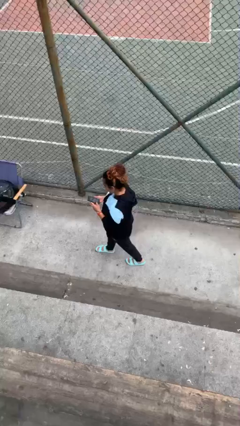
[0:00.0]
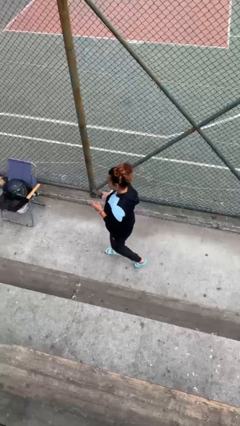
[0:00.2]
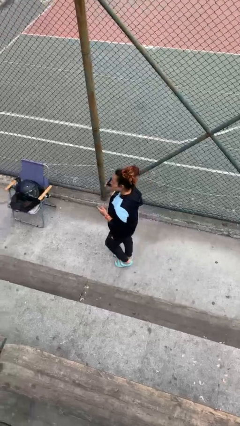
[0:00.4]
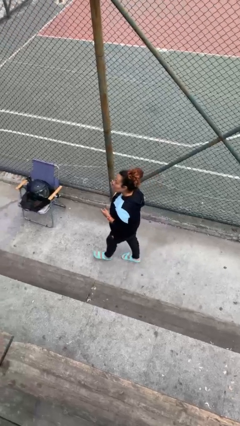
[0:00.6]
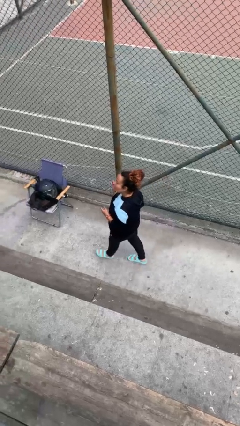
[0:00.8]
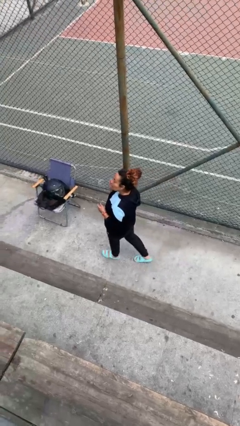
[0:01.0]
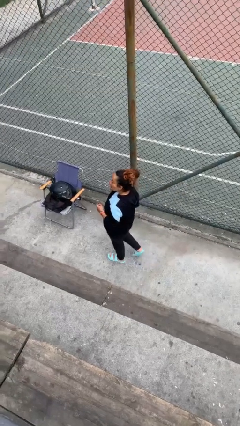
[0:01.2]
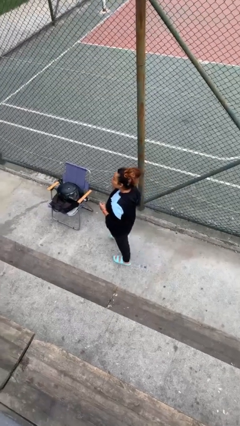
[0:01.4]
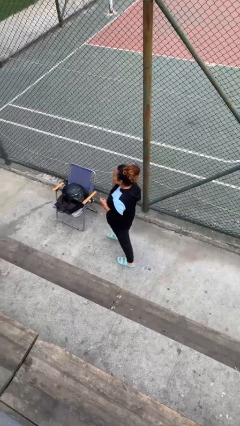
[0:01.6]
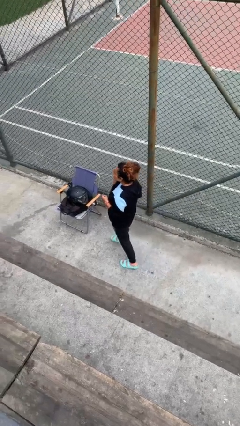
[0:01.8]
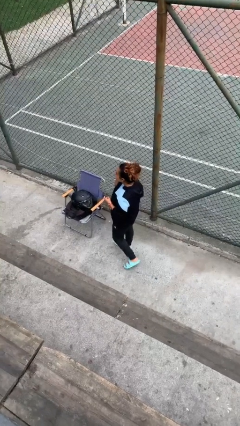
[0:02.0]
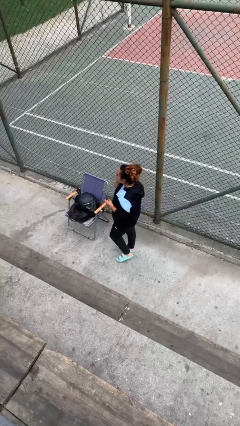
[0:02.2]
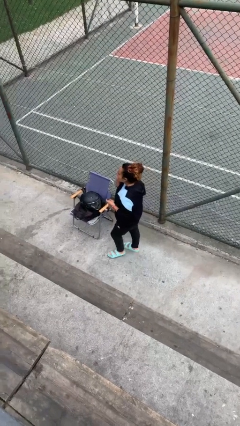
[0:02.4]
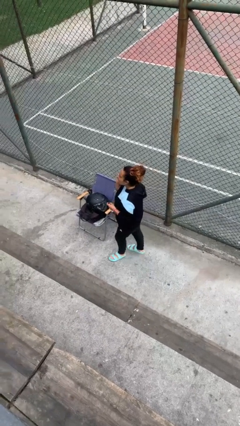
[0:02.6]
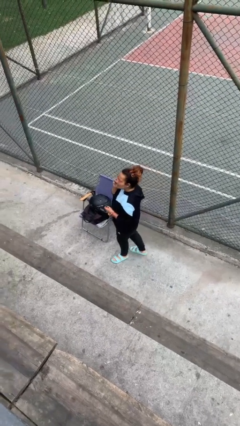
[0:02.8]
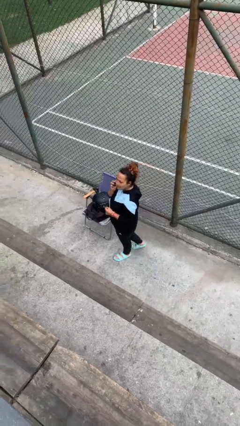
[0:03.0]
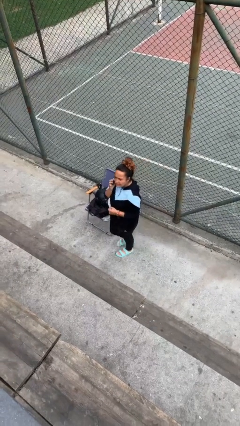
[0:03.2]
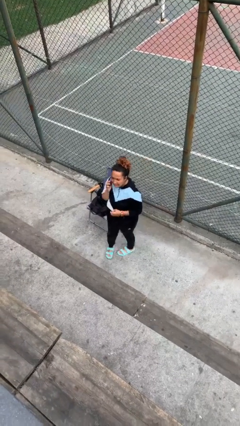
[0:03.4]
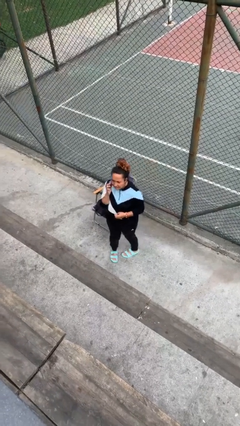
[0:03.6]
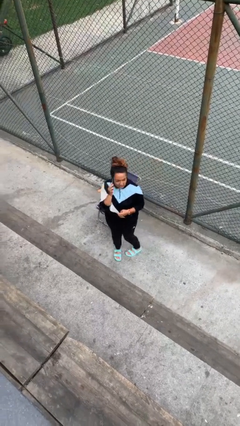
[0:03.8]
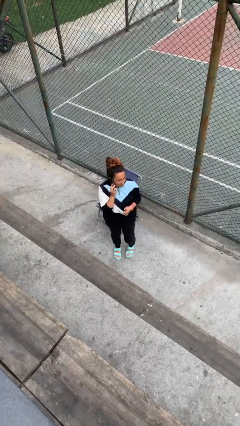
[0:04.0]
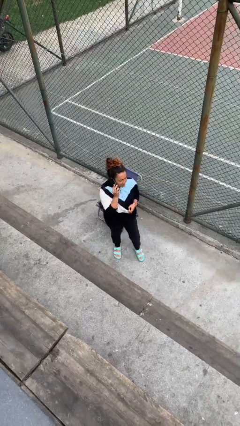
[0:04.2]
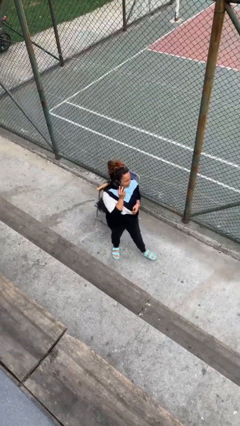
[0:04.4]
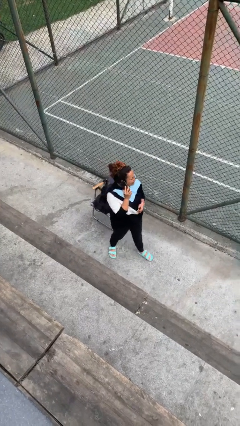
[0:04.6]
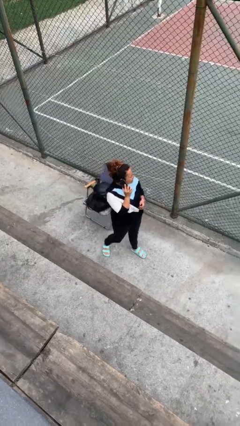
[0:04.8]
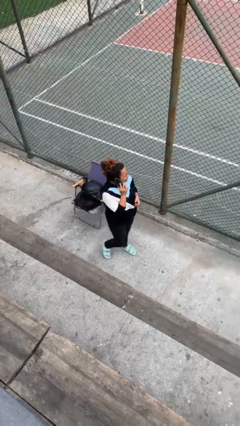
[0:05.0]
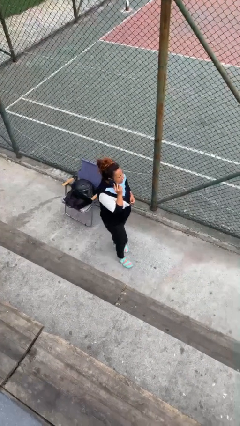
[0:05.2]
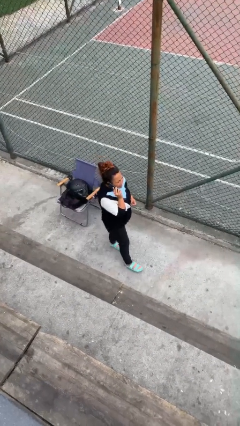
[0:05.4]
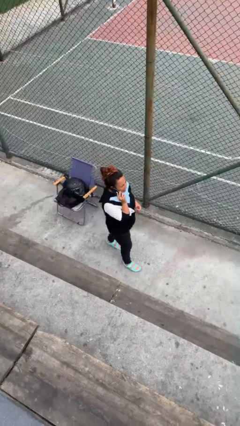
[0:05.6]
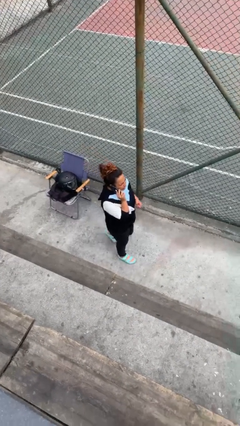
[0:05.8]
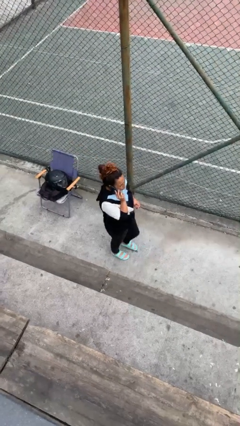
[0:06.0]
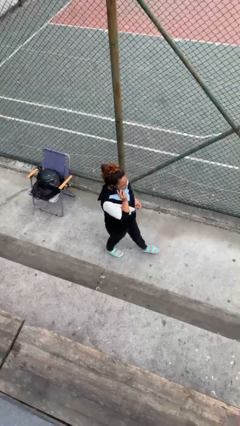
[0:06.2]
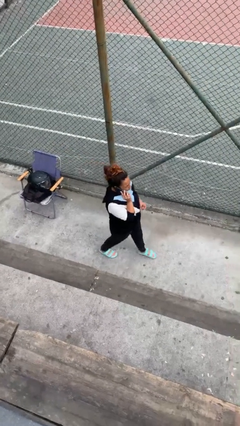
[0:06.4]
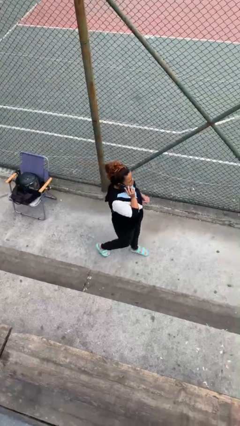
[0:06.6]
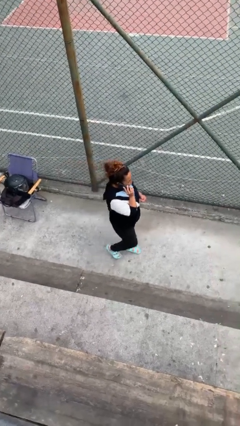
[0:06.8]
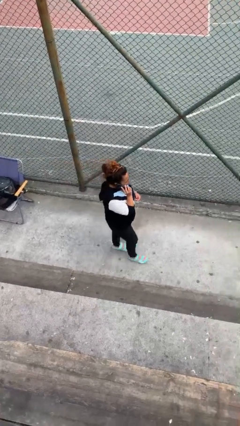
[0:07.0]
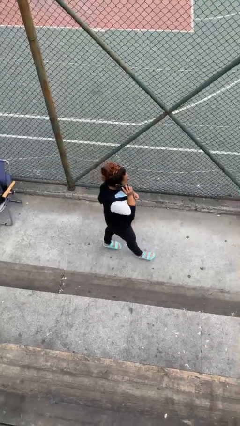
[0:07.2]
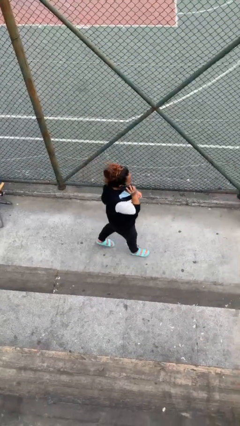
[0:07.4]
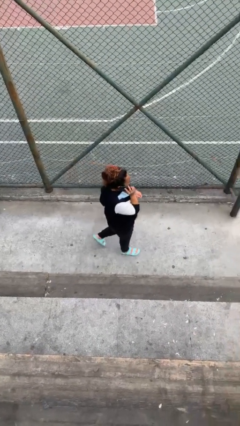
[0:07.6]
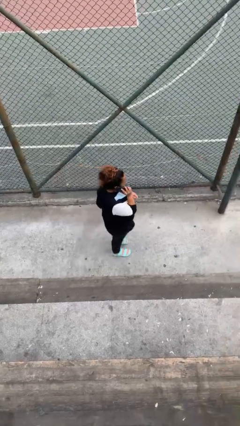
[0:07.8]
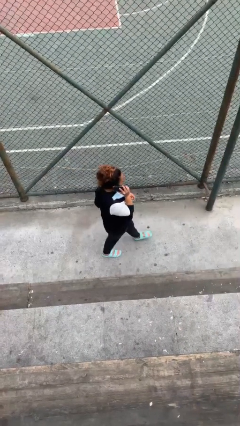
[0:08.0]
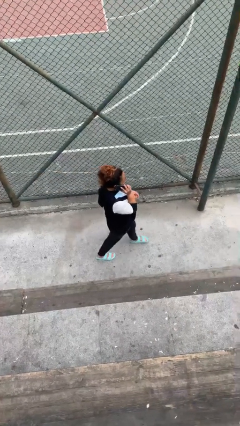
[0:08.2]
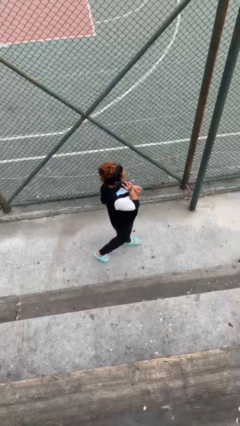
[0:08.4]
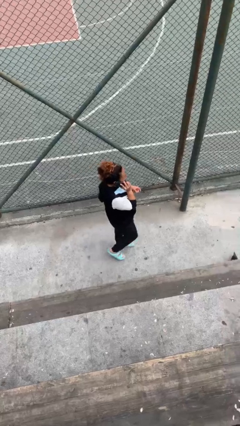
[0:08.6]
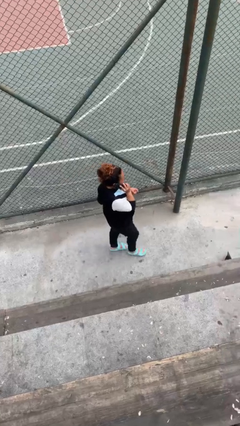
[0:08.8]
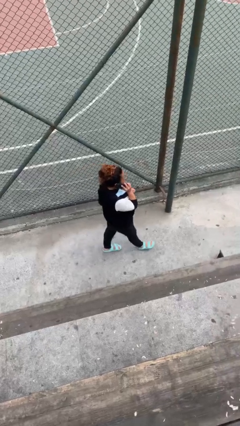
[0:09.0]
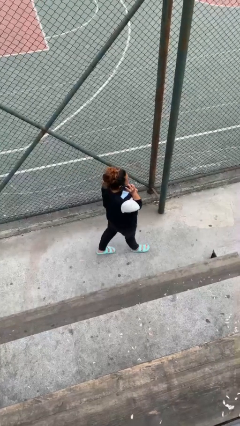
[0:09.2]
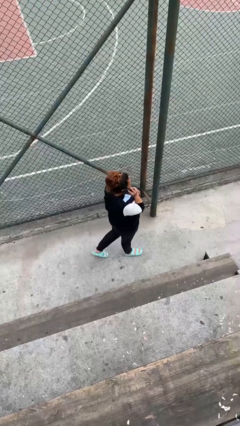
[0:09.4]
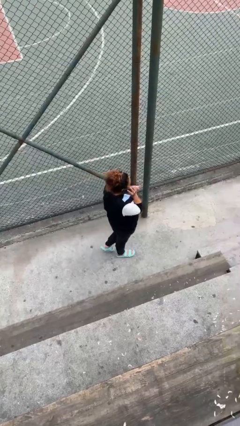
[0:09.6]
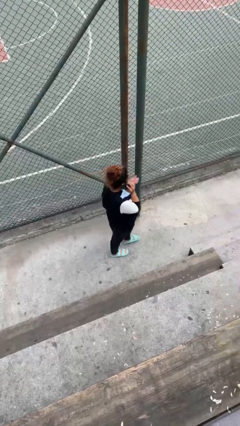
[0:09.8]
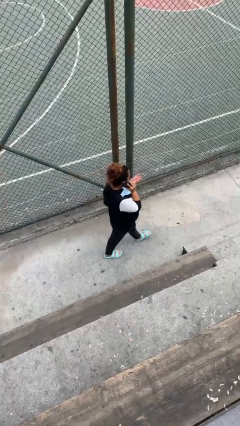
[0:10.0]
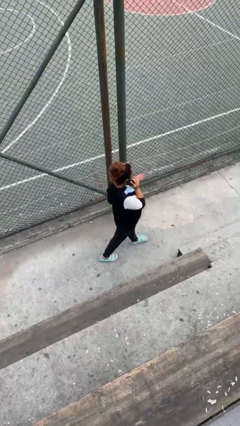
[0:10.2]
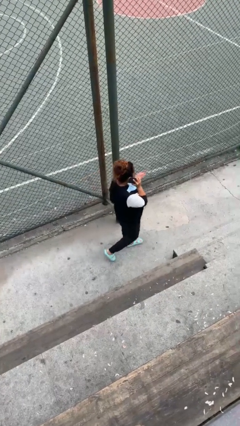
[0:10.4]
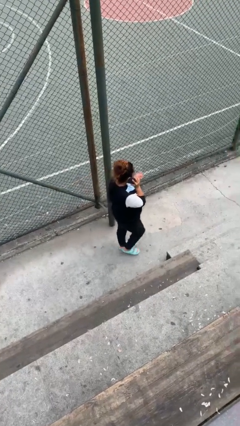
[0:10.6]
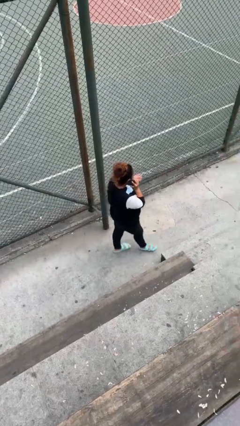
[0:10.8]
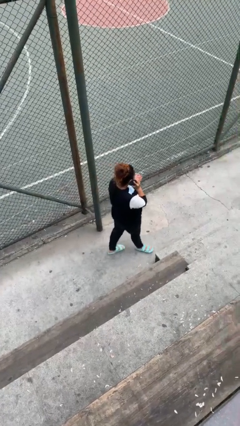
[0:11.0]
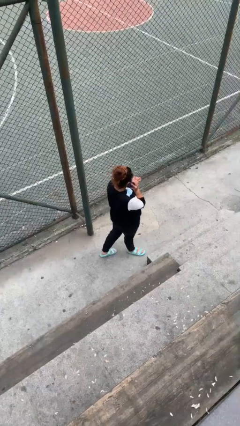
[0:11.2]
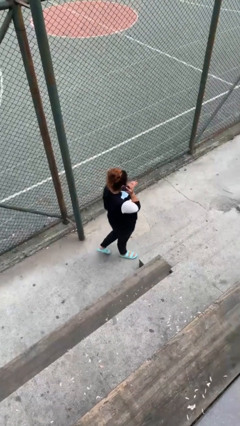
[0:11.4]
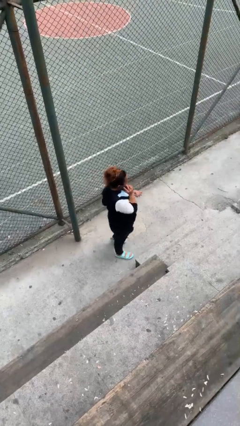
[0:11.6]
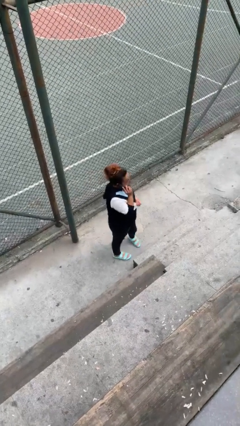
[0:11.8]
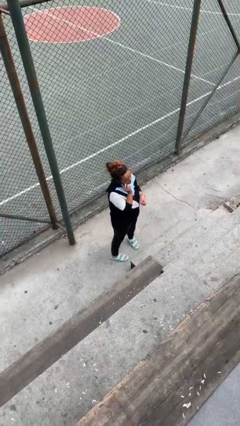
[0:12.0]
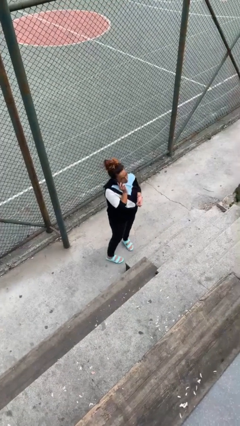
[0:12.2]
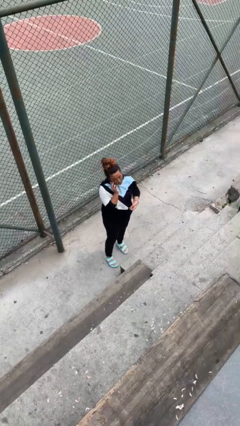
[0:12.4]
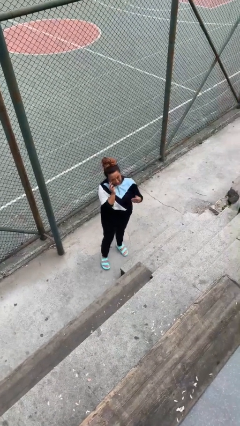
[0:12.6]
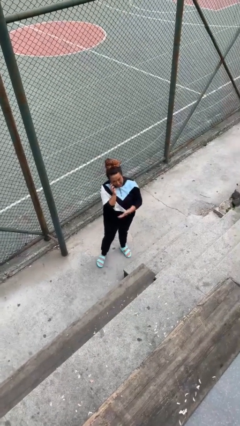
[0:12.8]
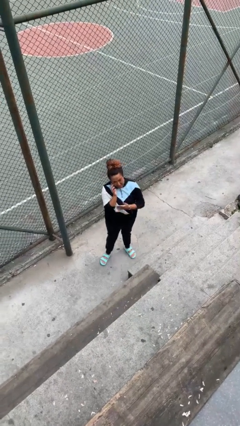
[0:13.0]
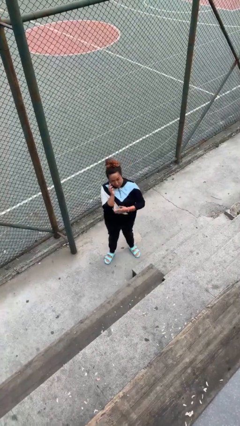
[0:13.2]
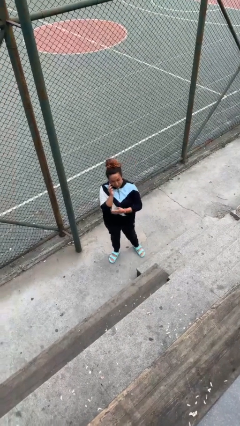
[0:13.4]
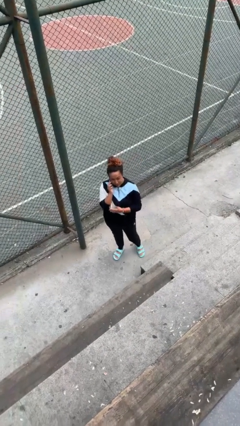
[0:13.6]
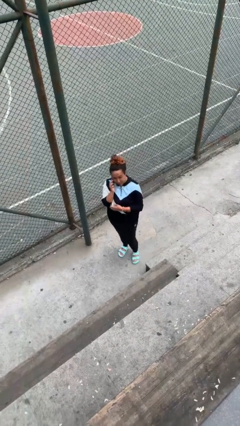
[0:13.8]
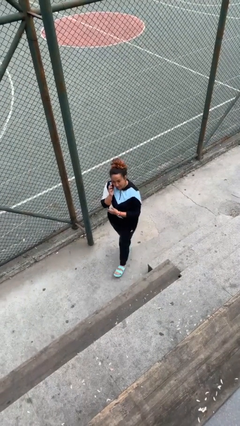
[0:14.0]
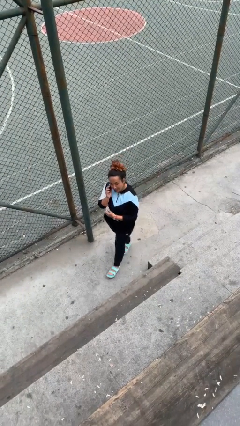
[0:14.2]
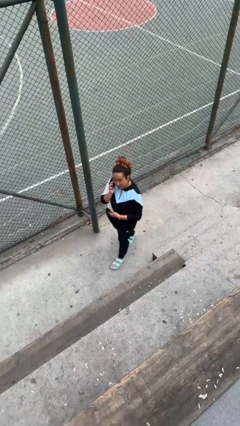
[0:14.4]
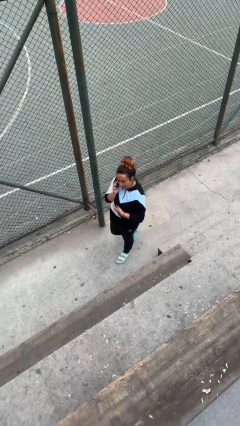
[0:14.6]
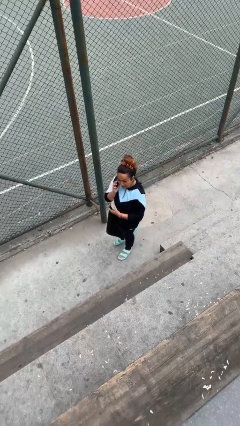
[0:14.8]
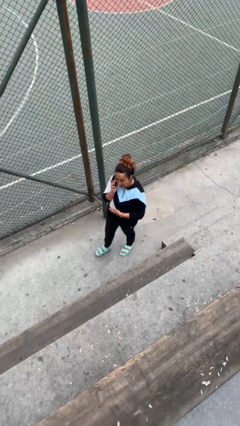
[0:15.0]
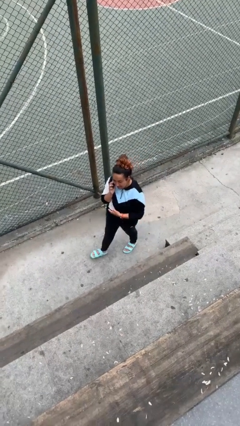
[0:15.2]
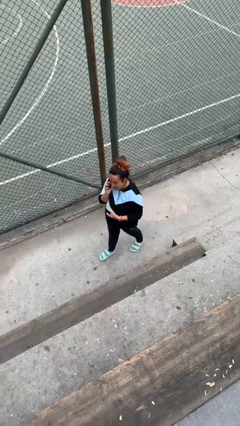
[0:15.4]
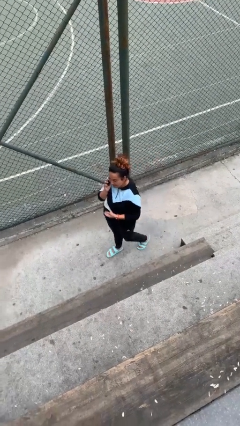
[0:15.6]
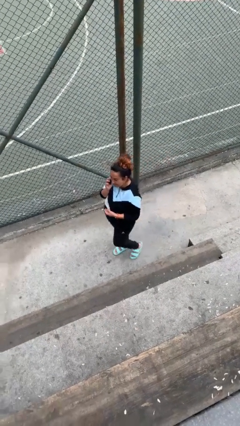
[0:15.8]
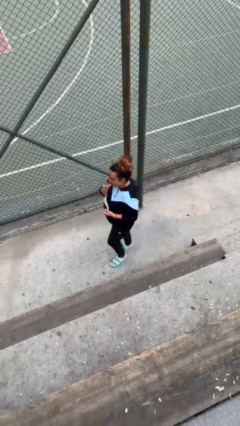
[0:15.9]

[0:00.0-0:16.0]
person talks on phone

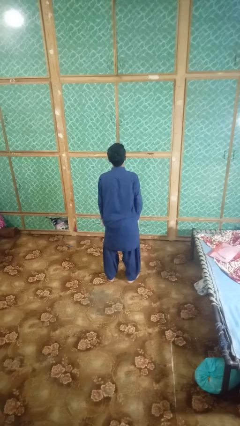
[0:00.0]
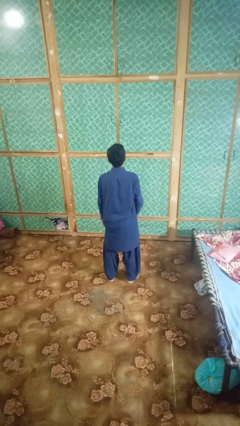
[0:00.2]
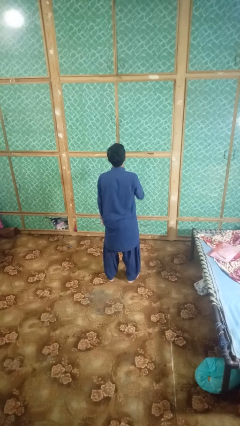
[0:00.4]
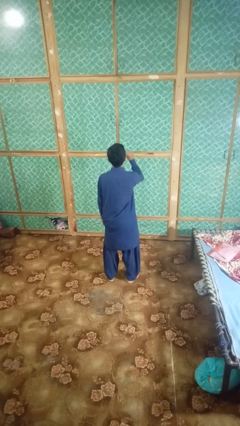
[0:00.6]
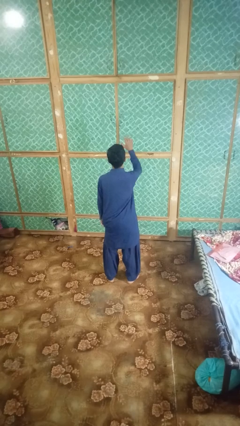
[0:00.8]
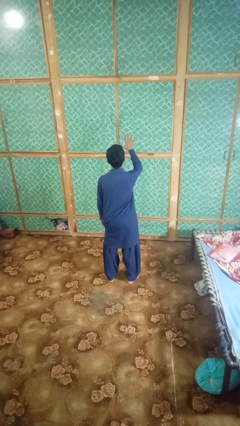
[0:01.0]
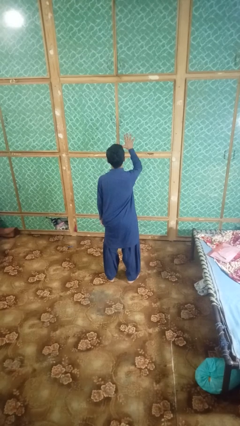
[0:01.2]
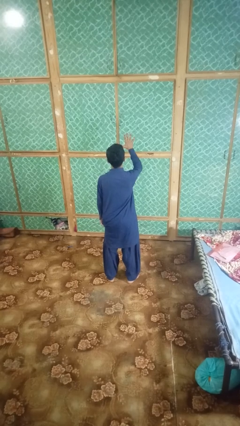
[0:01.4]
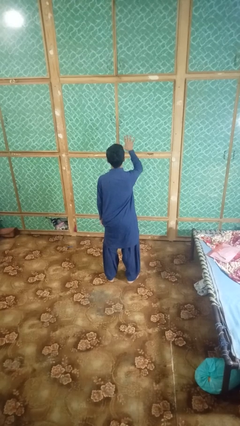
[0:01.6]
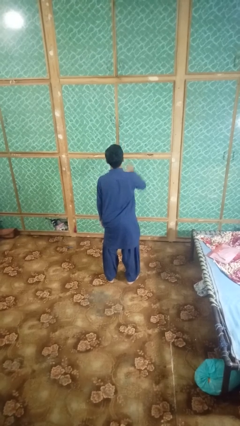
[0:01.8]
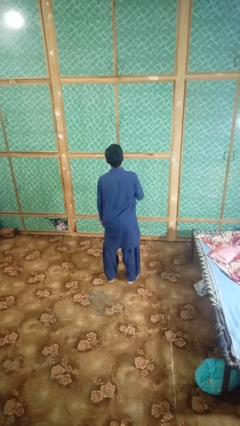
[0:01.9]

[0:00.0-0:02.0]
person gestures number five

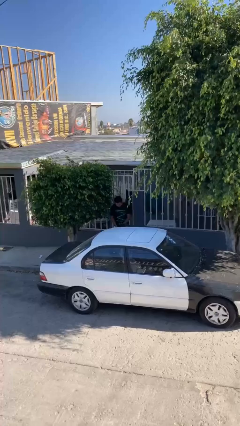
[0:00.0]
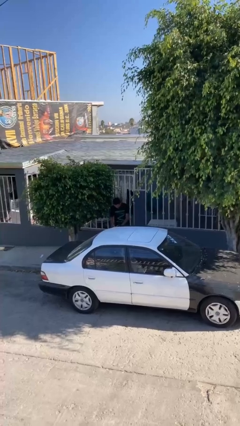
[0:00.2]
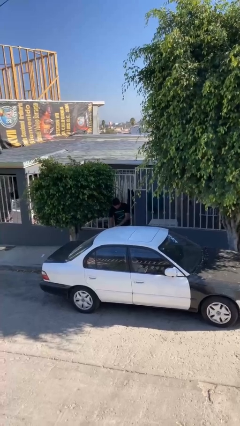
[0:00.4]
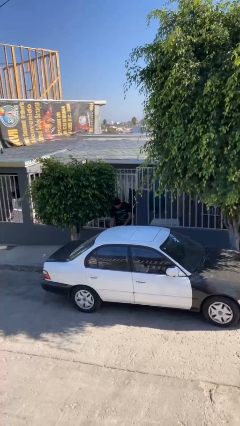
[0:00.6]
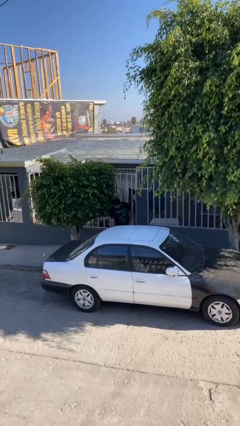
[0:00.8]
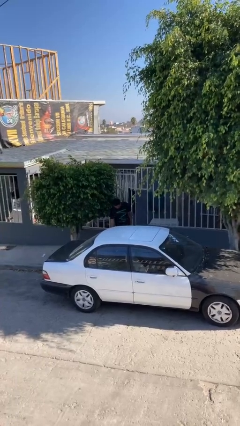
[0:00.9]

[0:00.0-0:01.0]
person closes car door
